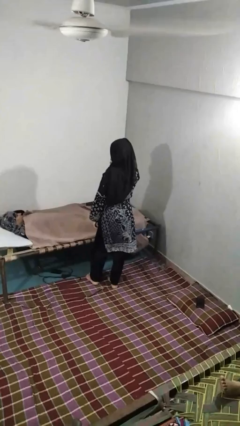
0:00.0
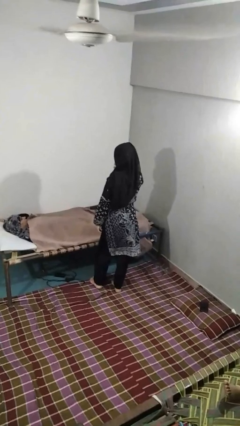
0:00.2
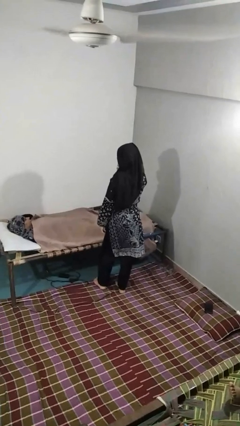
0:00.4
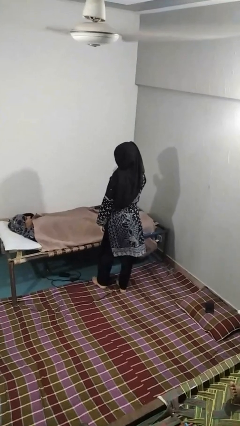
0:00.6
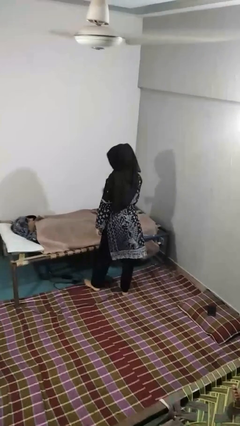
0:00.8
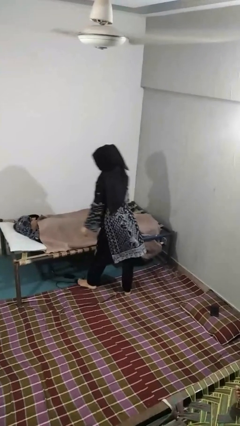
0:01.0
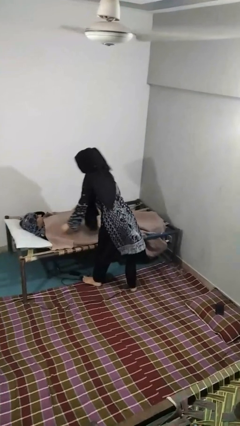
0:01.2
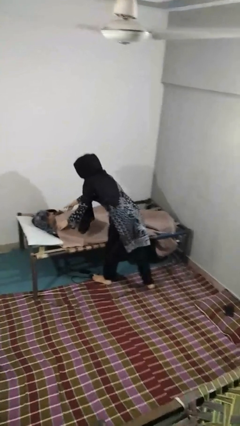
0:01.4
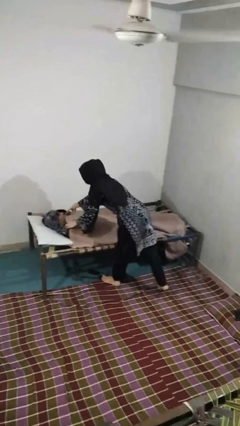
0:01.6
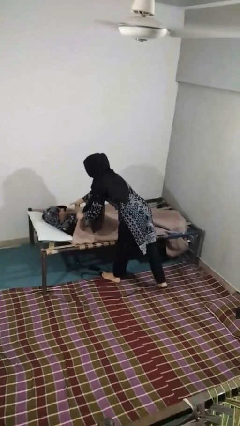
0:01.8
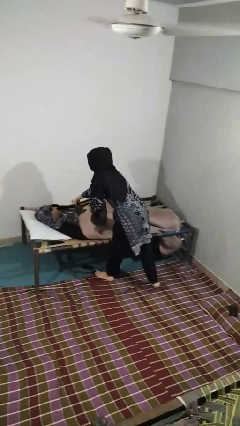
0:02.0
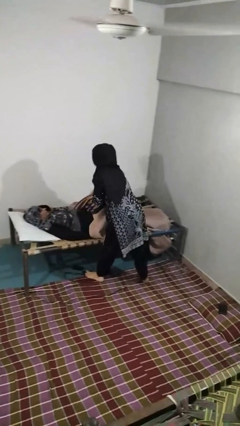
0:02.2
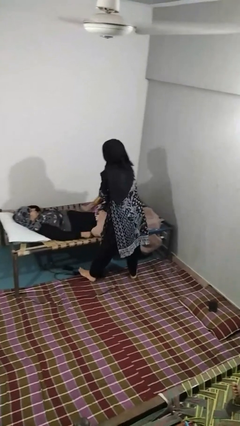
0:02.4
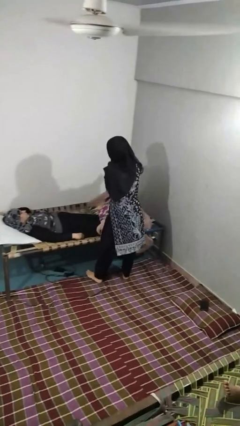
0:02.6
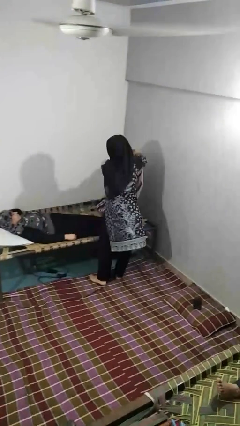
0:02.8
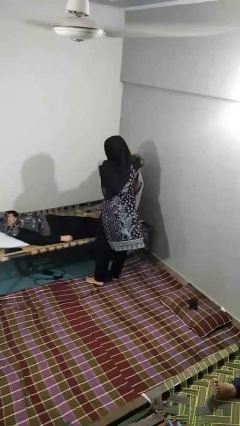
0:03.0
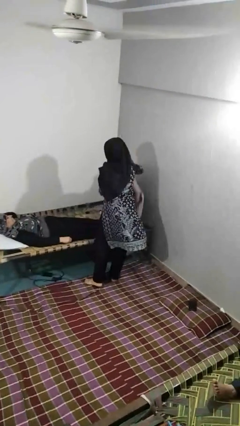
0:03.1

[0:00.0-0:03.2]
person uncovers friend with blanket

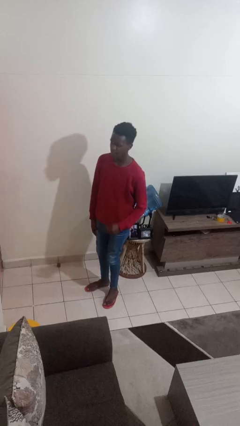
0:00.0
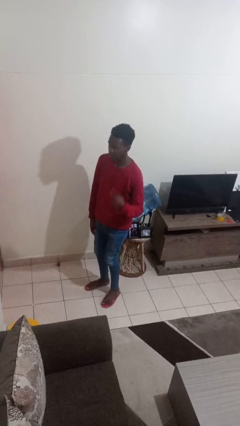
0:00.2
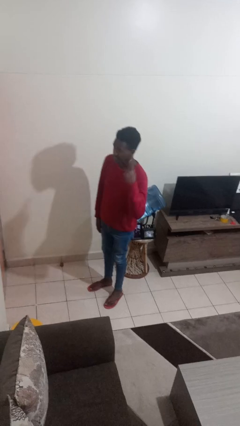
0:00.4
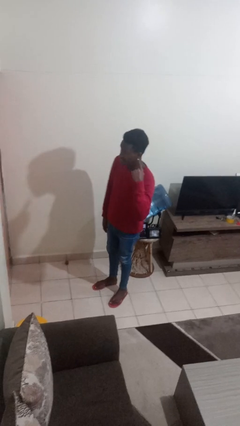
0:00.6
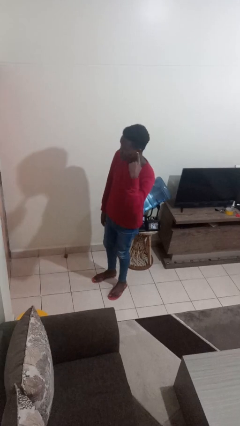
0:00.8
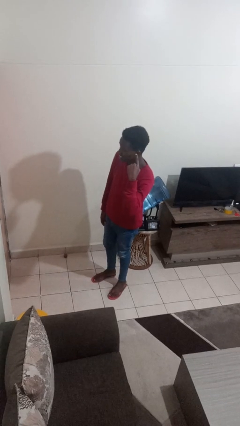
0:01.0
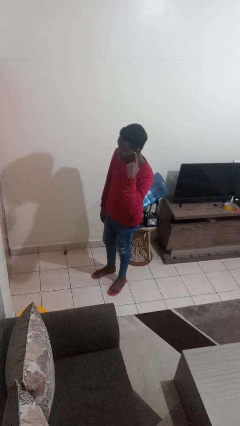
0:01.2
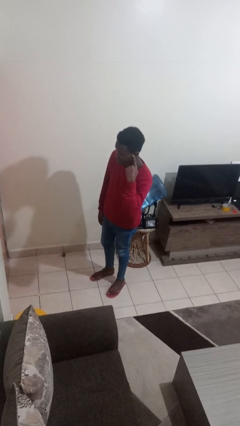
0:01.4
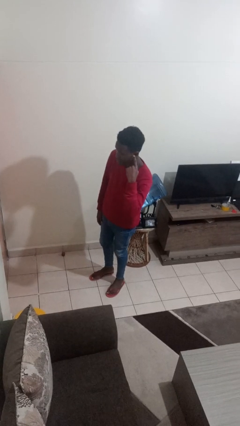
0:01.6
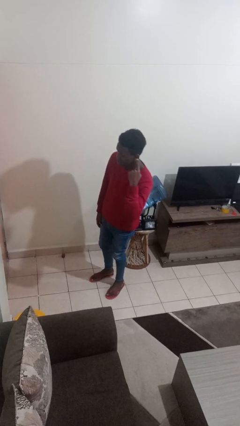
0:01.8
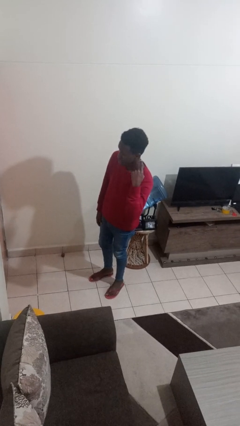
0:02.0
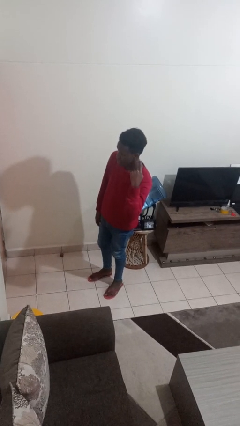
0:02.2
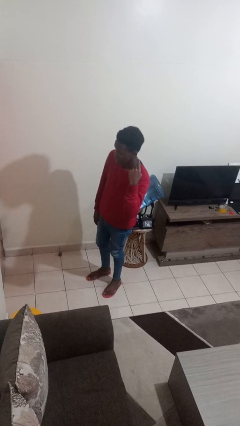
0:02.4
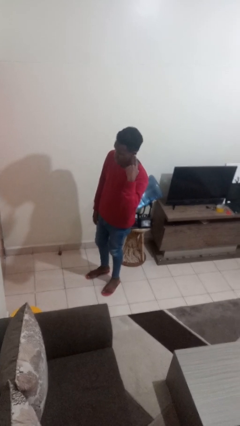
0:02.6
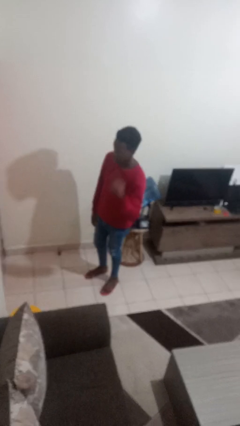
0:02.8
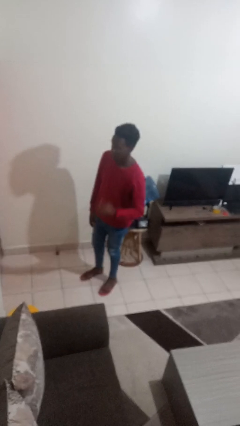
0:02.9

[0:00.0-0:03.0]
person gestures listen closely

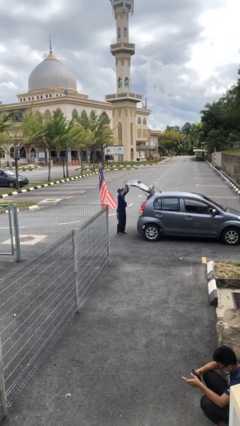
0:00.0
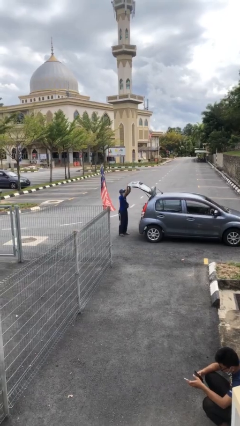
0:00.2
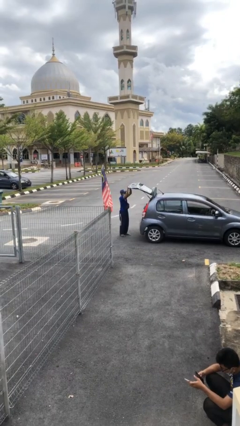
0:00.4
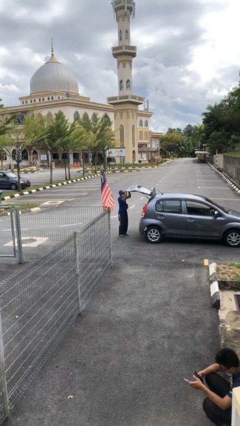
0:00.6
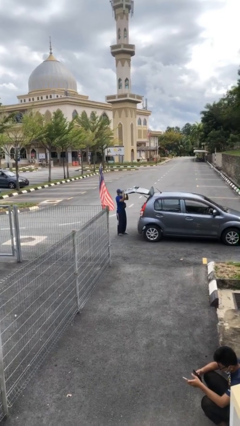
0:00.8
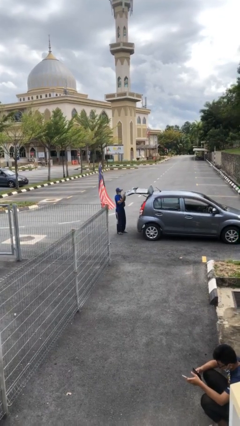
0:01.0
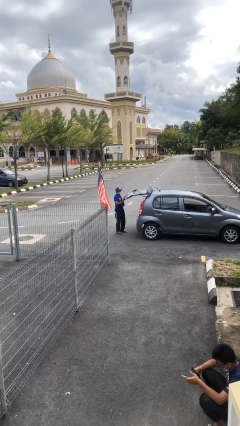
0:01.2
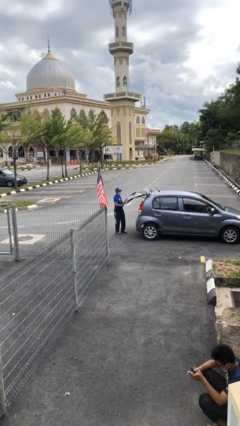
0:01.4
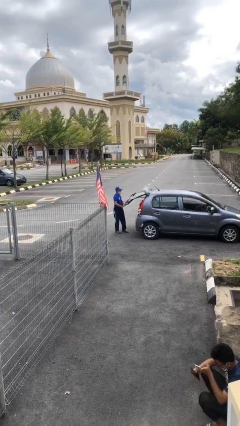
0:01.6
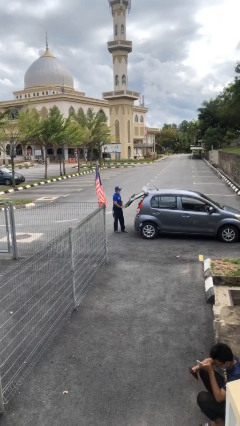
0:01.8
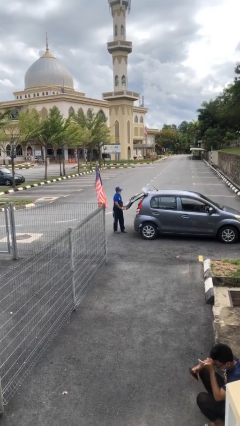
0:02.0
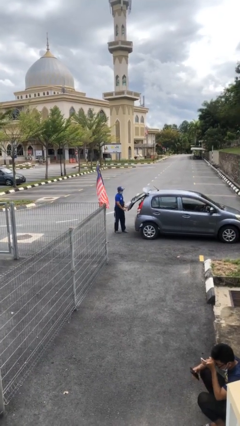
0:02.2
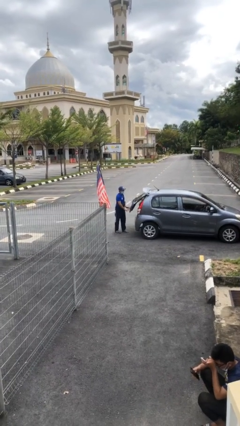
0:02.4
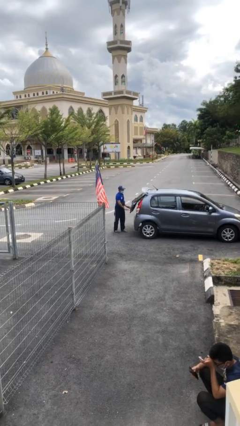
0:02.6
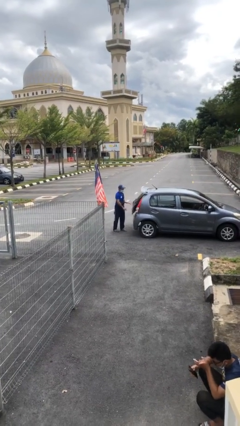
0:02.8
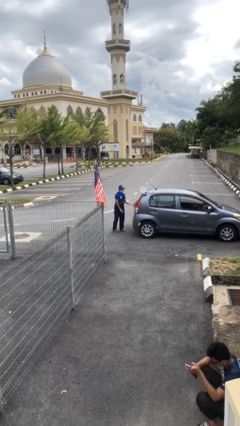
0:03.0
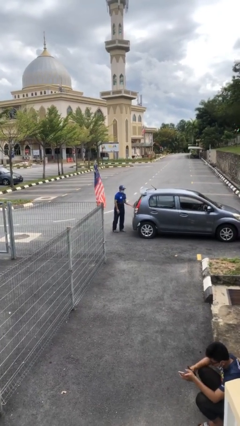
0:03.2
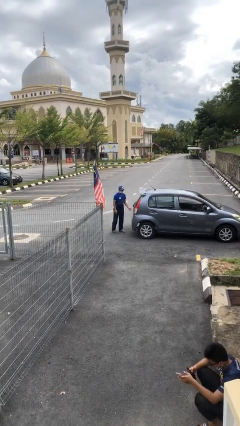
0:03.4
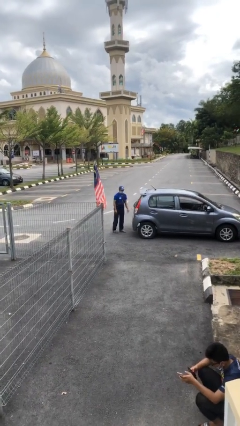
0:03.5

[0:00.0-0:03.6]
person closes car trunk

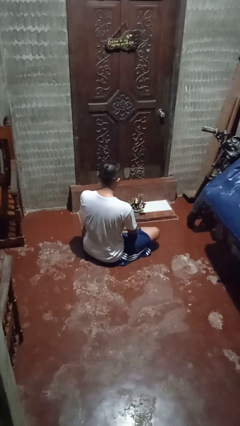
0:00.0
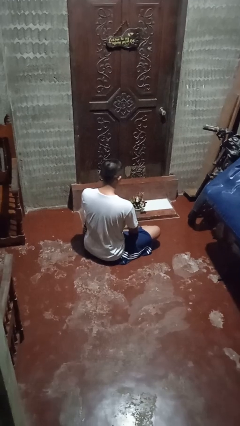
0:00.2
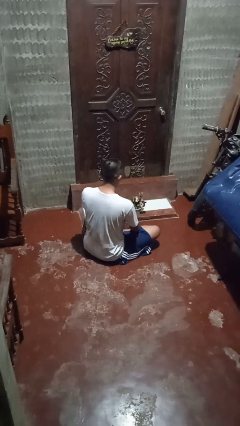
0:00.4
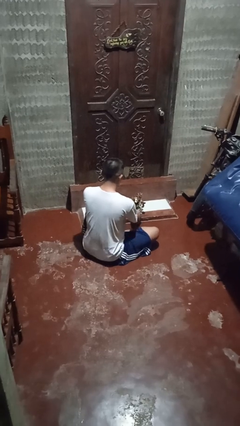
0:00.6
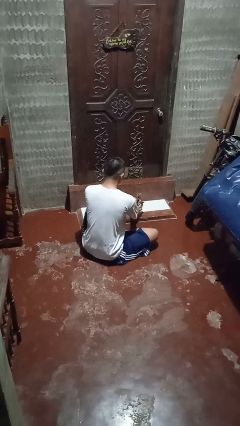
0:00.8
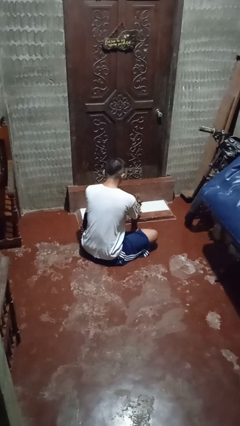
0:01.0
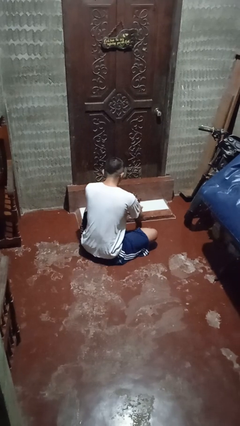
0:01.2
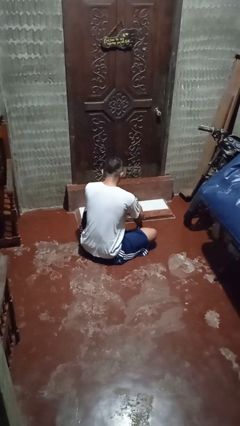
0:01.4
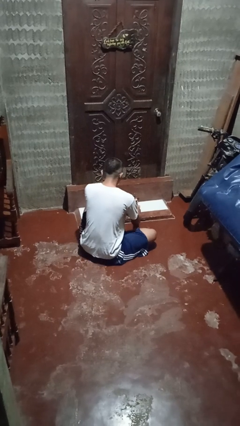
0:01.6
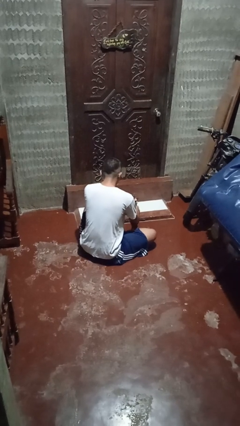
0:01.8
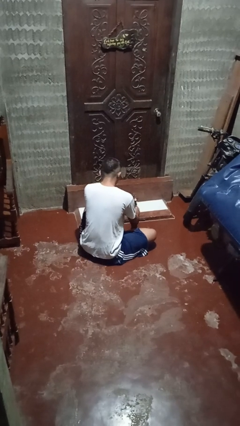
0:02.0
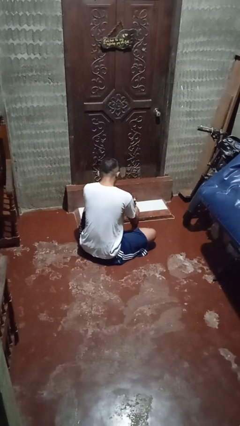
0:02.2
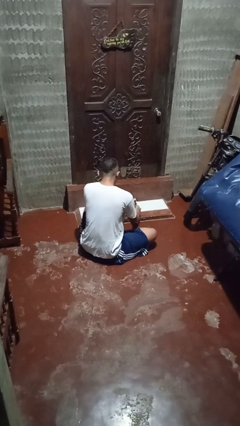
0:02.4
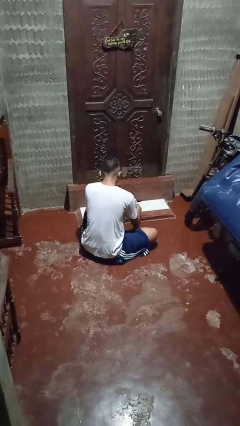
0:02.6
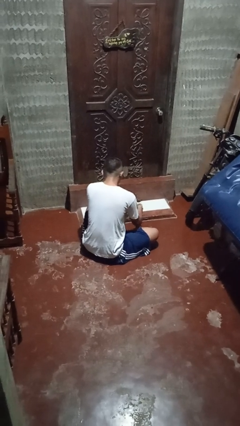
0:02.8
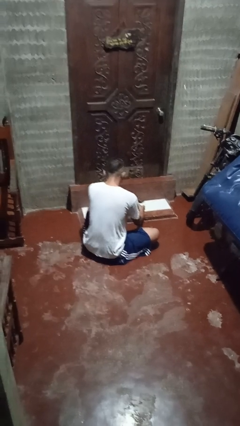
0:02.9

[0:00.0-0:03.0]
person arranges flowers in vase

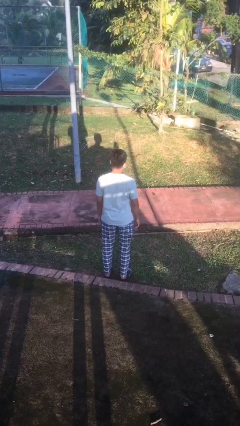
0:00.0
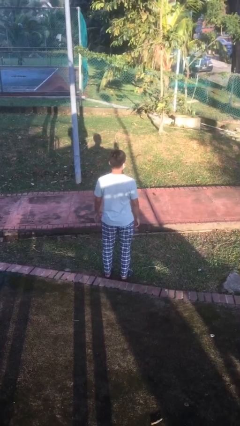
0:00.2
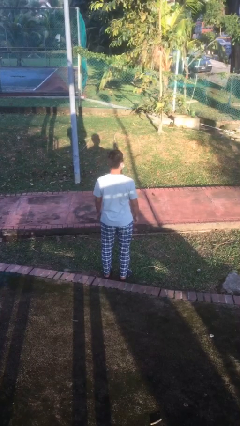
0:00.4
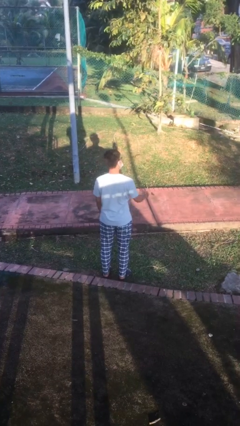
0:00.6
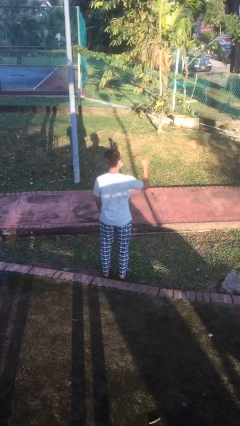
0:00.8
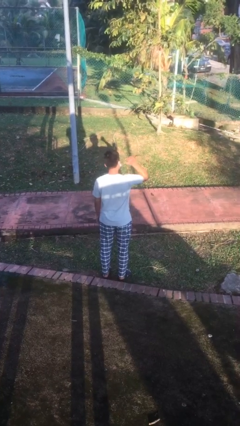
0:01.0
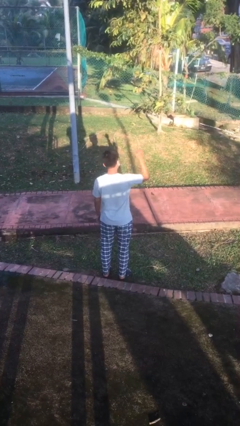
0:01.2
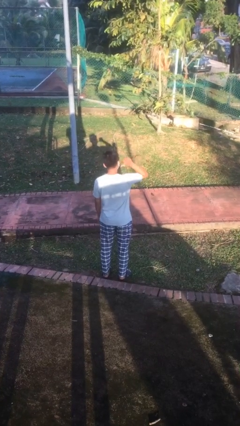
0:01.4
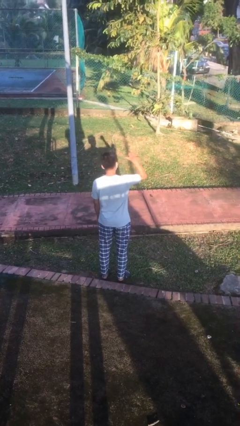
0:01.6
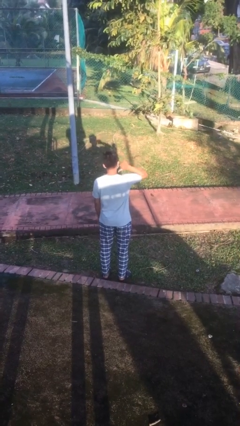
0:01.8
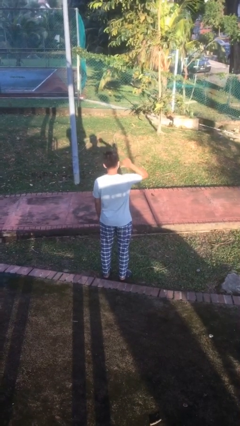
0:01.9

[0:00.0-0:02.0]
person gestures behind me

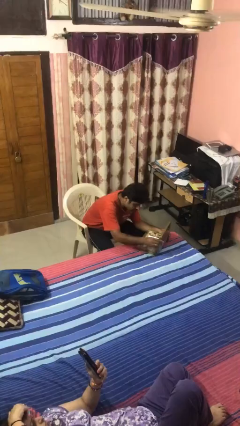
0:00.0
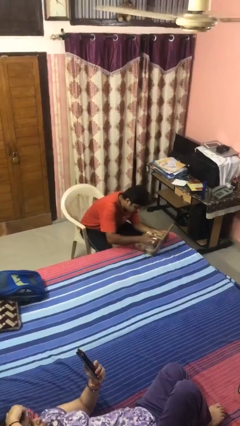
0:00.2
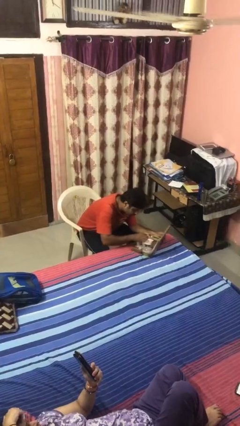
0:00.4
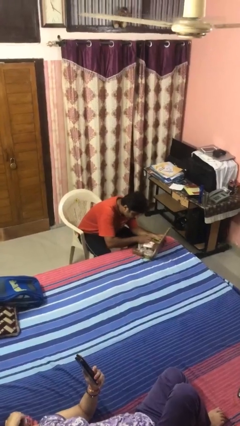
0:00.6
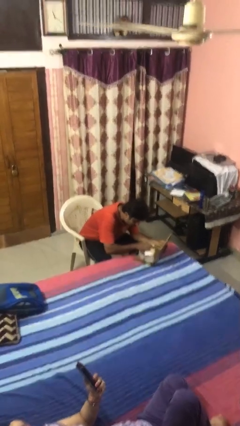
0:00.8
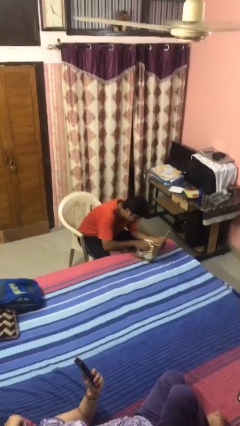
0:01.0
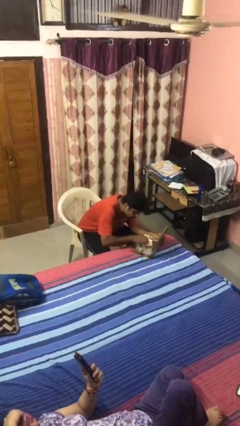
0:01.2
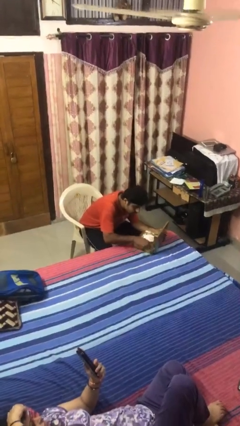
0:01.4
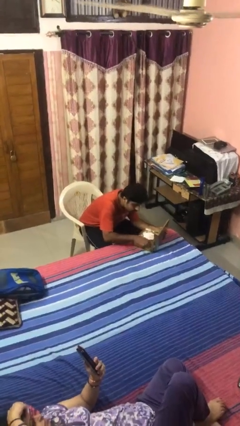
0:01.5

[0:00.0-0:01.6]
person searches jewelry box

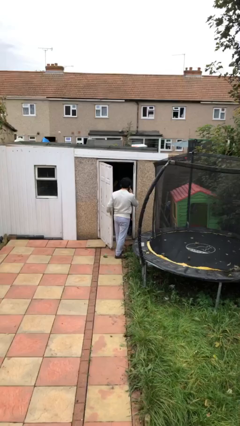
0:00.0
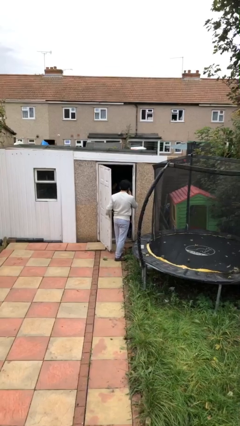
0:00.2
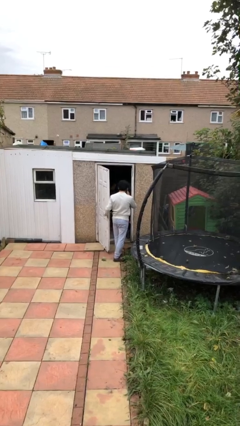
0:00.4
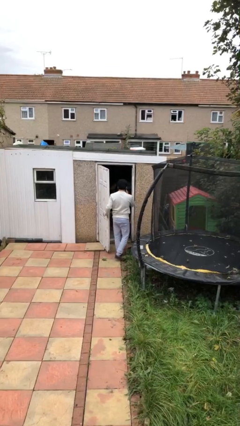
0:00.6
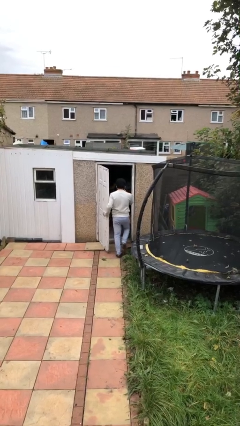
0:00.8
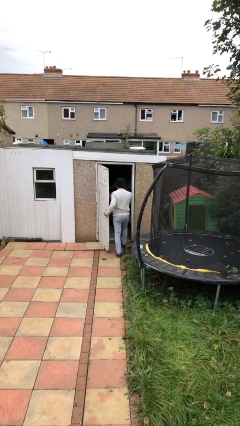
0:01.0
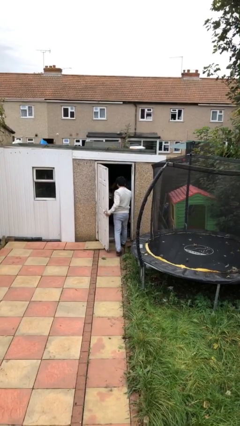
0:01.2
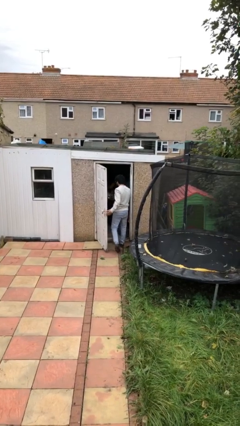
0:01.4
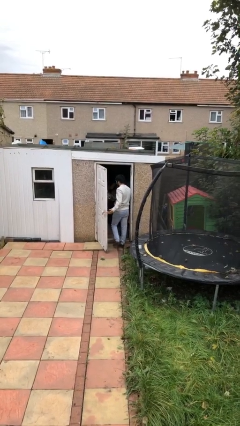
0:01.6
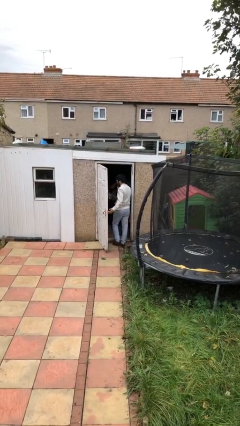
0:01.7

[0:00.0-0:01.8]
person exits scene through structure
